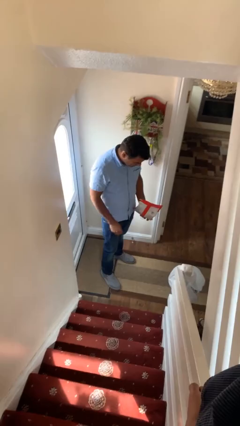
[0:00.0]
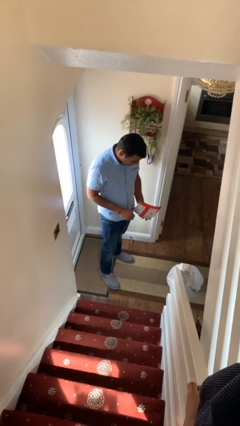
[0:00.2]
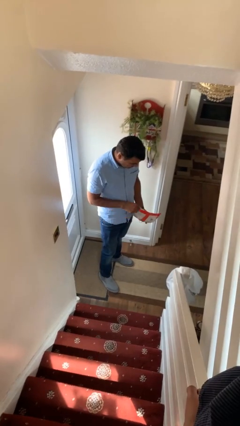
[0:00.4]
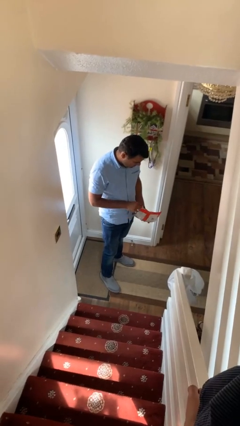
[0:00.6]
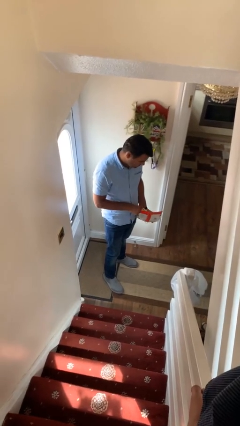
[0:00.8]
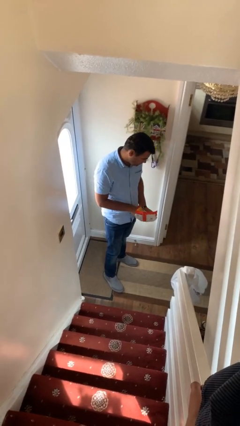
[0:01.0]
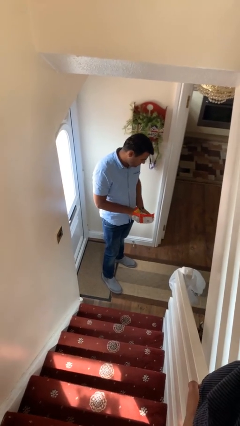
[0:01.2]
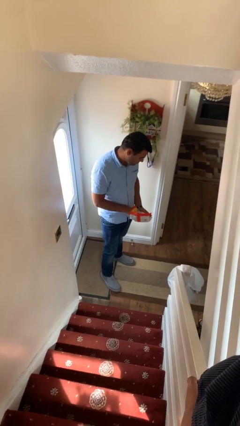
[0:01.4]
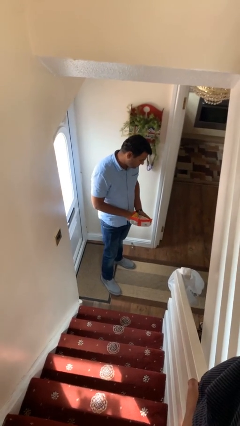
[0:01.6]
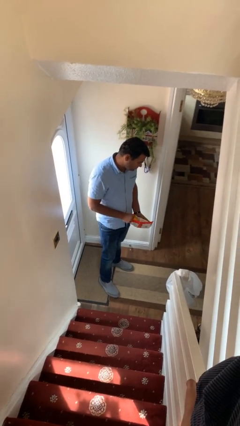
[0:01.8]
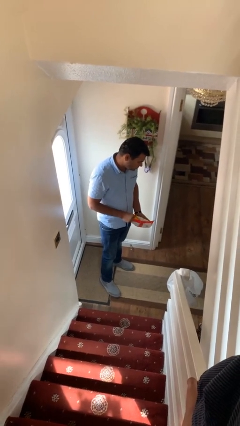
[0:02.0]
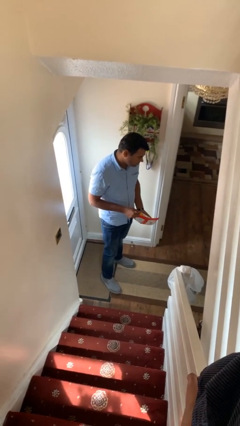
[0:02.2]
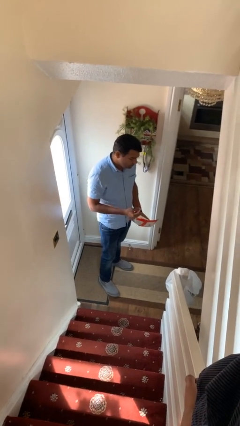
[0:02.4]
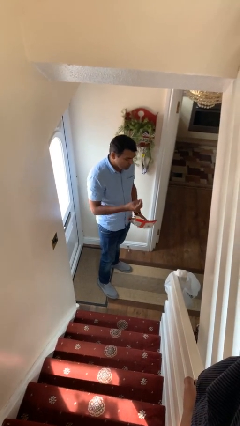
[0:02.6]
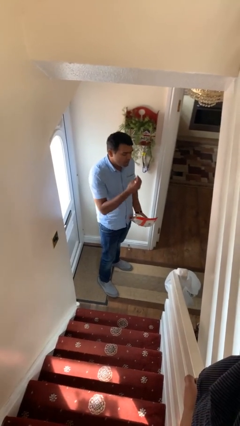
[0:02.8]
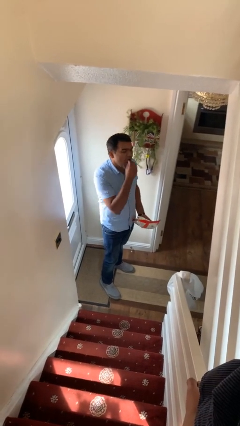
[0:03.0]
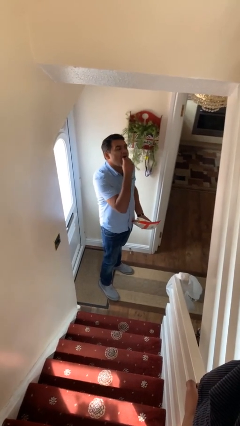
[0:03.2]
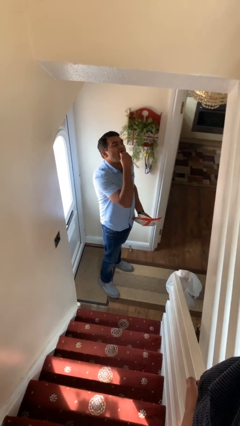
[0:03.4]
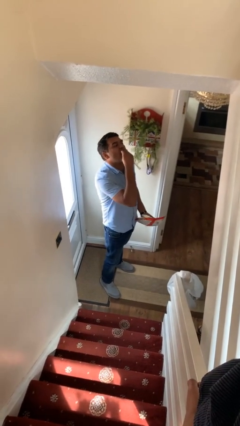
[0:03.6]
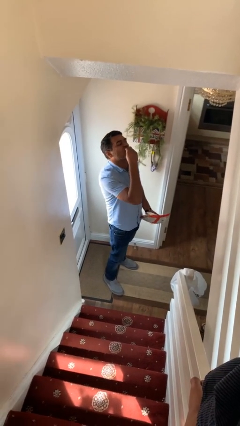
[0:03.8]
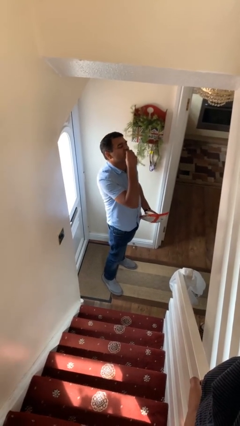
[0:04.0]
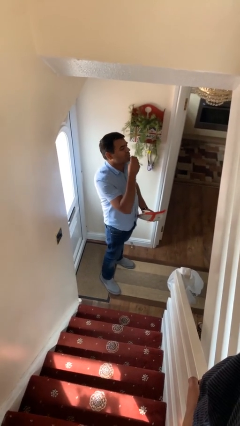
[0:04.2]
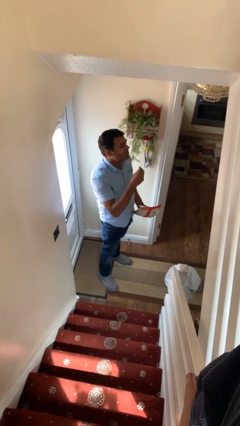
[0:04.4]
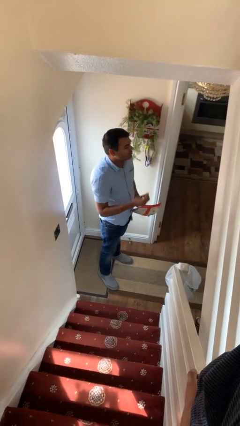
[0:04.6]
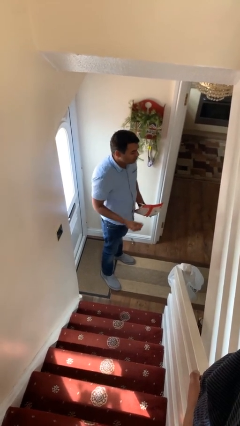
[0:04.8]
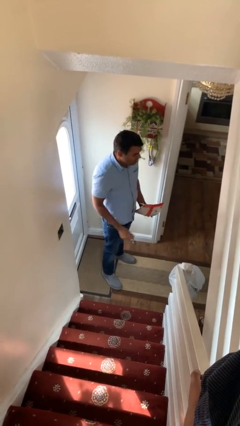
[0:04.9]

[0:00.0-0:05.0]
person eats snack from bag

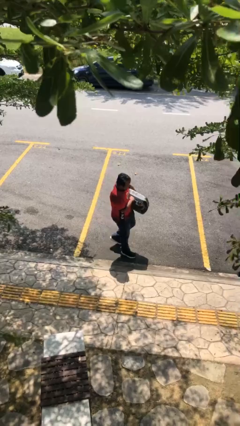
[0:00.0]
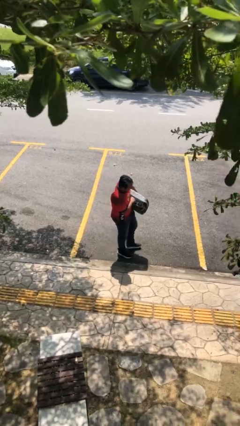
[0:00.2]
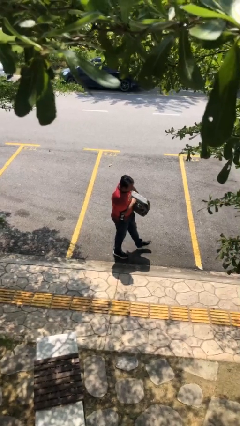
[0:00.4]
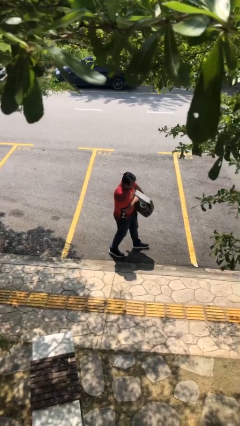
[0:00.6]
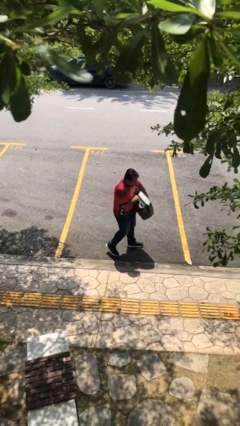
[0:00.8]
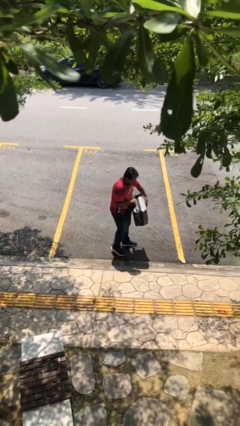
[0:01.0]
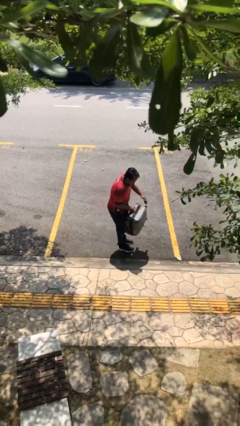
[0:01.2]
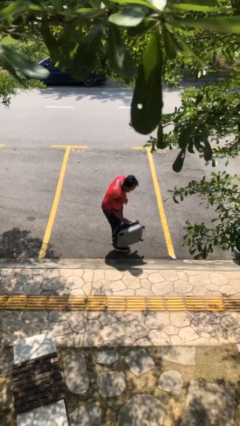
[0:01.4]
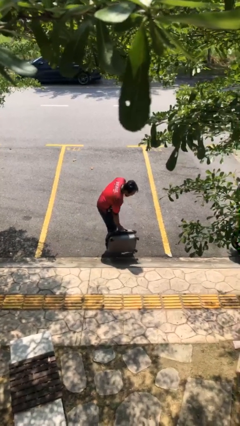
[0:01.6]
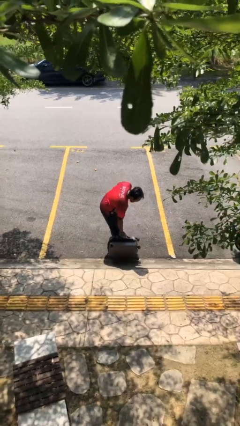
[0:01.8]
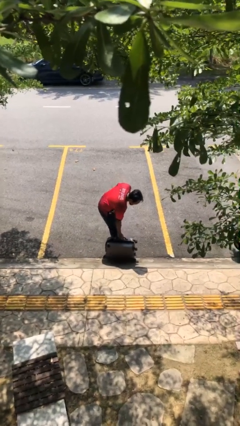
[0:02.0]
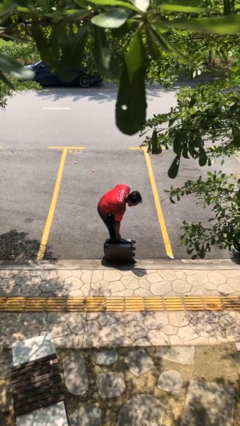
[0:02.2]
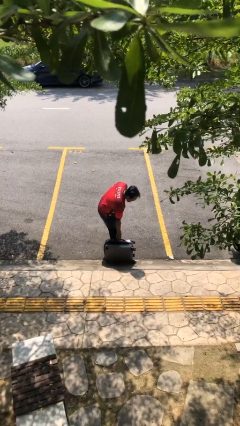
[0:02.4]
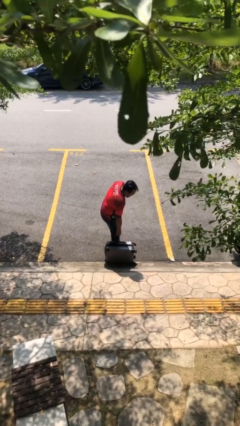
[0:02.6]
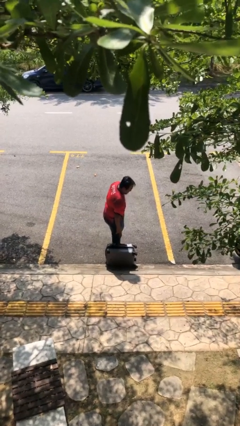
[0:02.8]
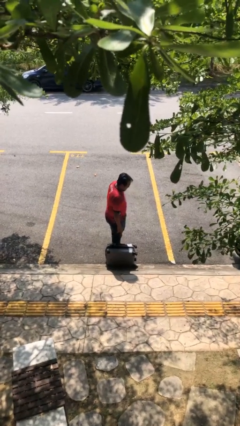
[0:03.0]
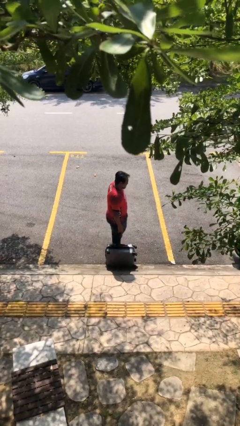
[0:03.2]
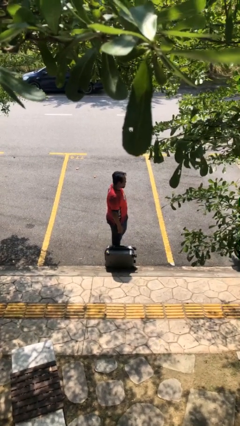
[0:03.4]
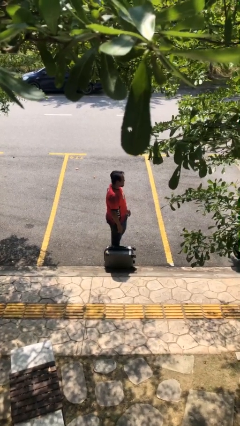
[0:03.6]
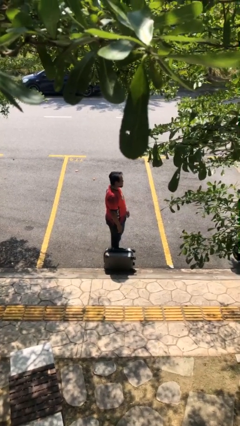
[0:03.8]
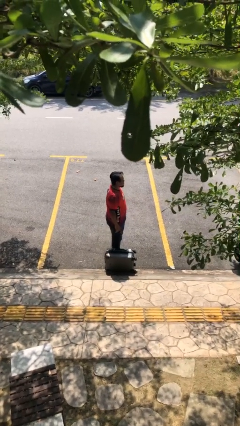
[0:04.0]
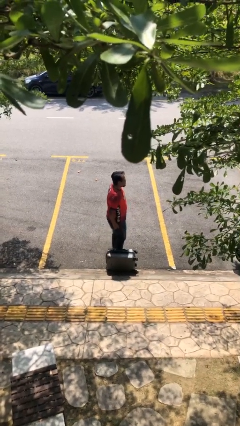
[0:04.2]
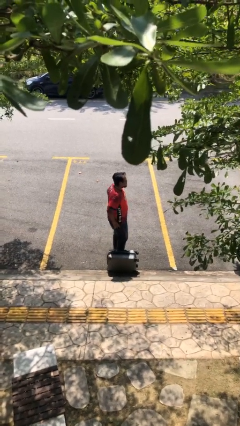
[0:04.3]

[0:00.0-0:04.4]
person puts down object on floor

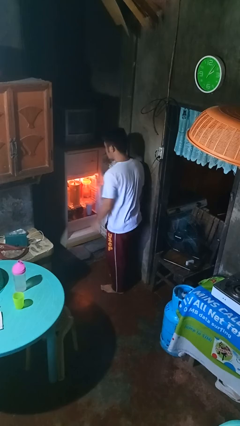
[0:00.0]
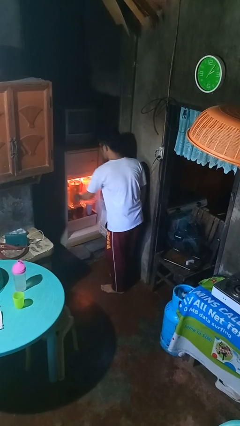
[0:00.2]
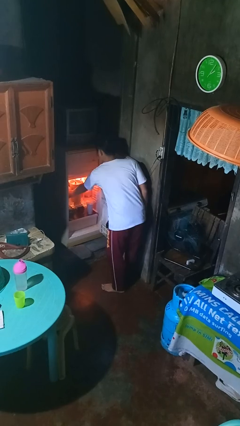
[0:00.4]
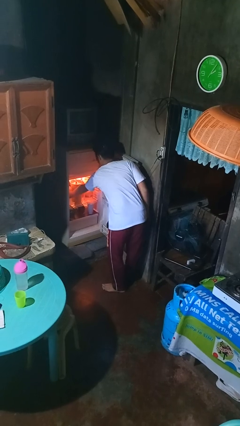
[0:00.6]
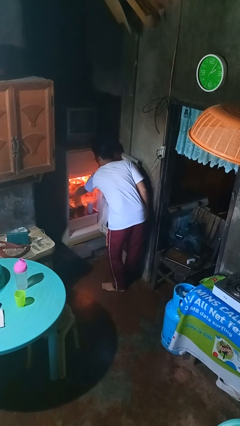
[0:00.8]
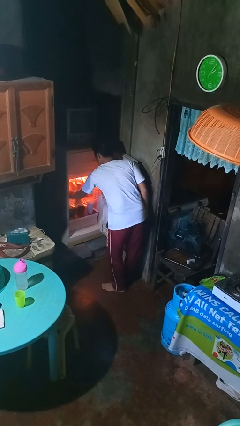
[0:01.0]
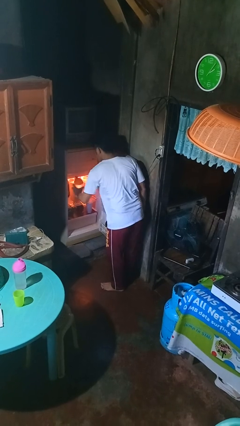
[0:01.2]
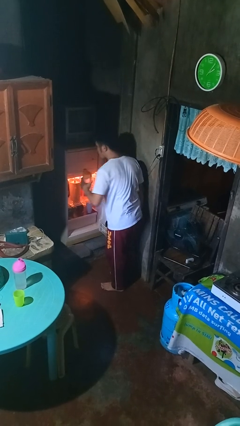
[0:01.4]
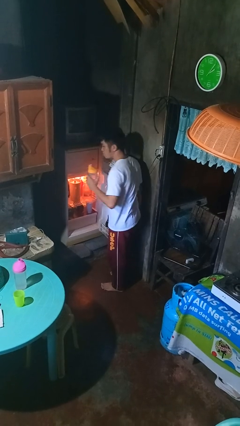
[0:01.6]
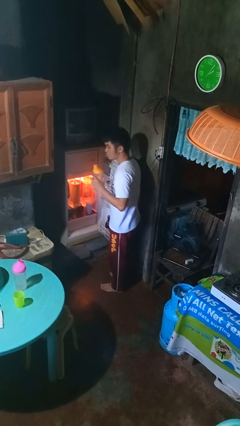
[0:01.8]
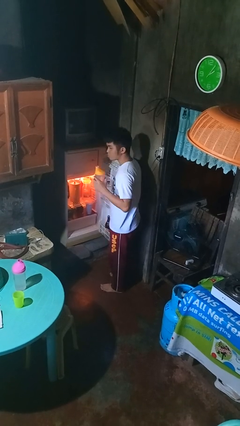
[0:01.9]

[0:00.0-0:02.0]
person takes object from refrigerator

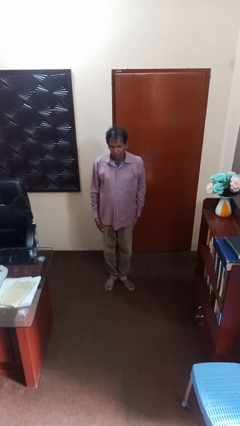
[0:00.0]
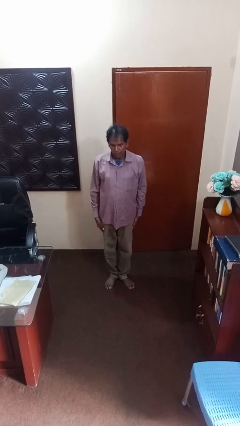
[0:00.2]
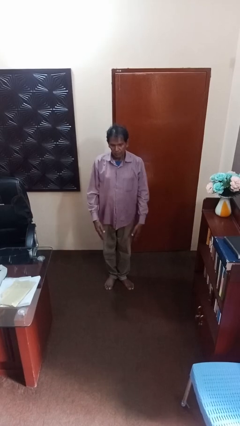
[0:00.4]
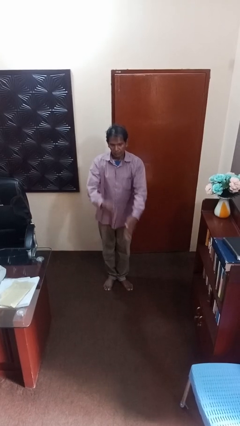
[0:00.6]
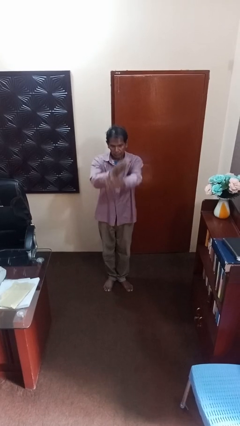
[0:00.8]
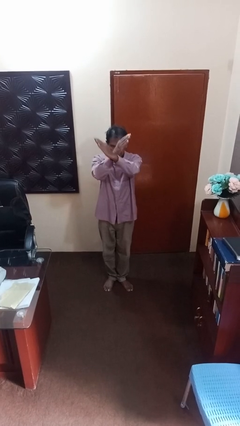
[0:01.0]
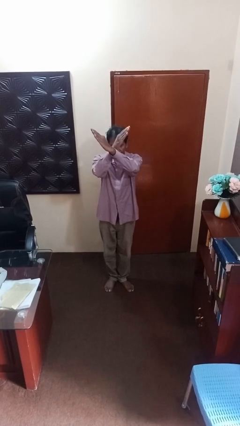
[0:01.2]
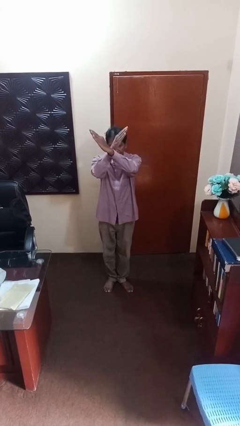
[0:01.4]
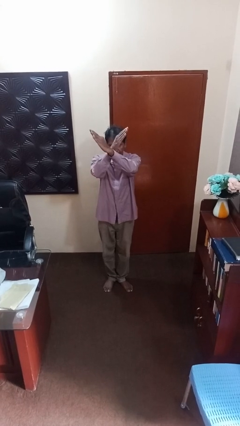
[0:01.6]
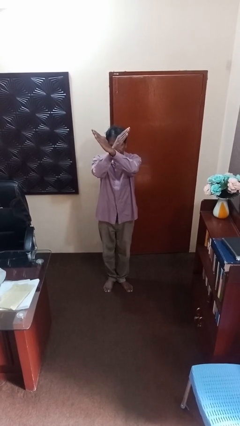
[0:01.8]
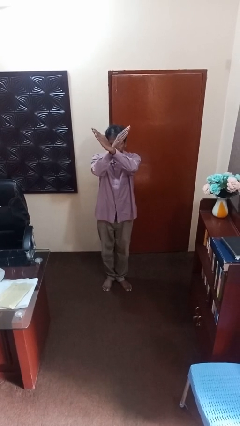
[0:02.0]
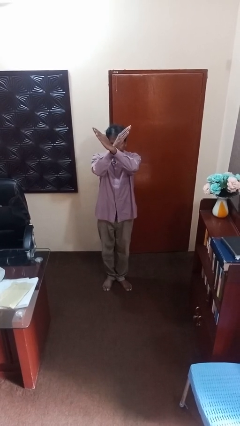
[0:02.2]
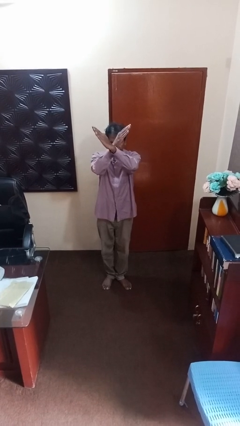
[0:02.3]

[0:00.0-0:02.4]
person gestures arms x

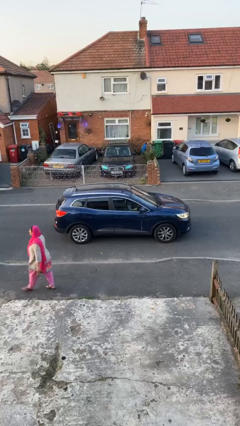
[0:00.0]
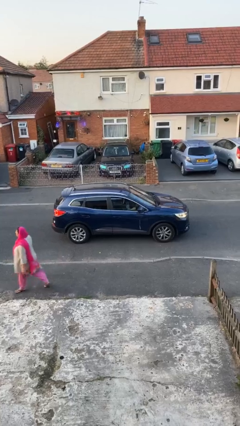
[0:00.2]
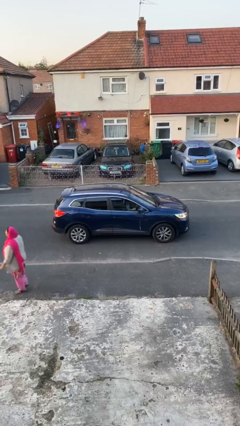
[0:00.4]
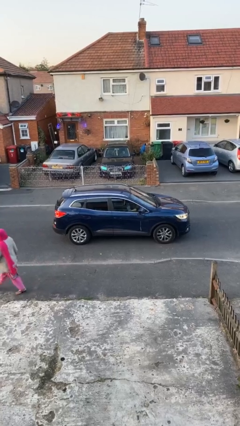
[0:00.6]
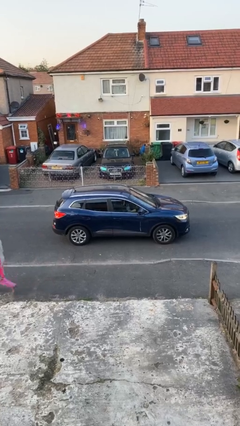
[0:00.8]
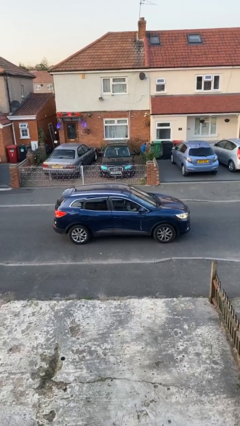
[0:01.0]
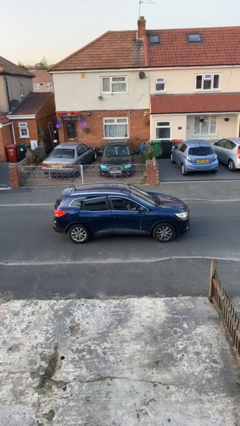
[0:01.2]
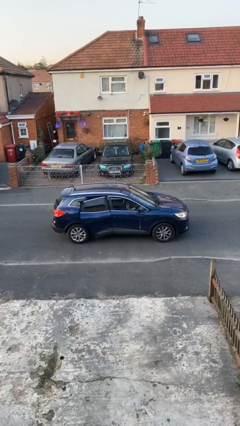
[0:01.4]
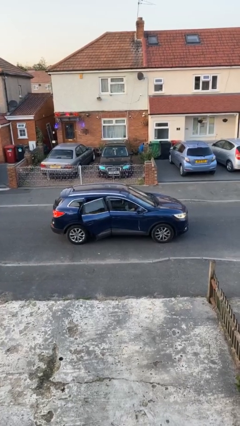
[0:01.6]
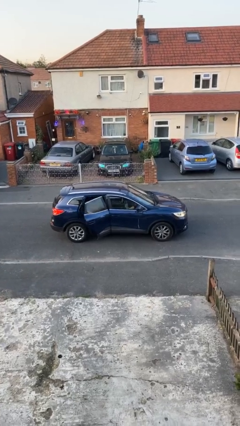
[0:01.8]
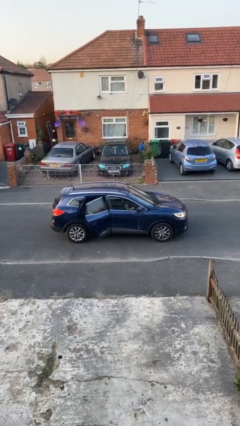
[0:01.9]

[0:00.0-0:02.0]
car drops off person

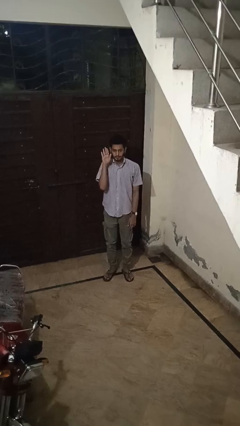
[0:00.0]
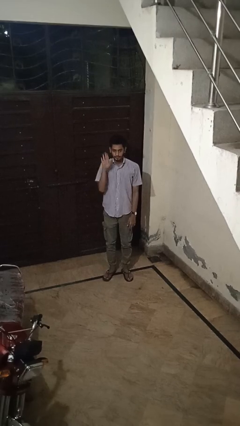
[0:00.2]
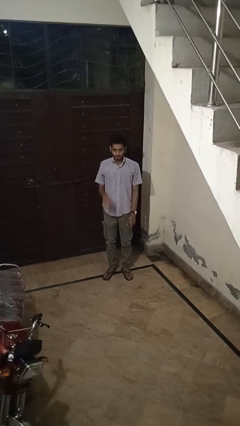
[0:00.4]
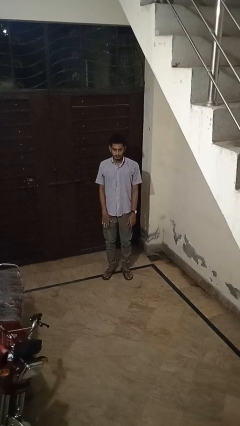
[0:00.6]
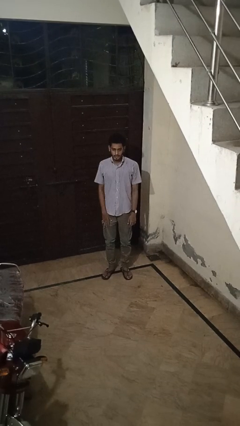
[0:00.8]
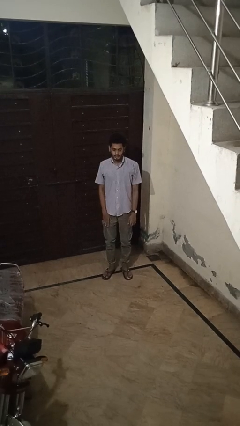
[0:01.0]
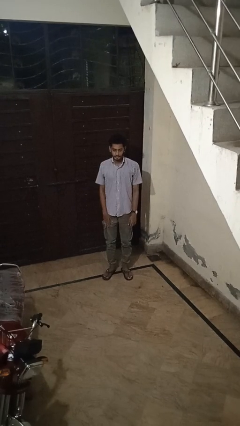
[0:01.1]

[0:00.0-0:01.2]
person gestures lower hand

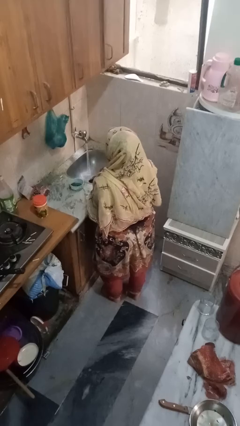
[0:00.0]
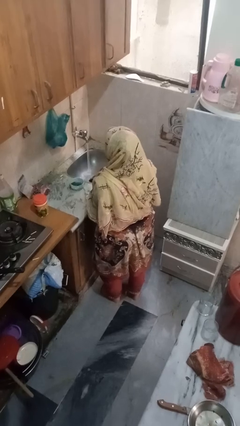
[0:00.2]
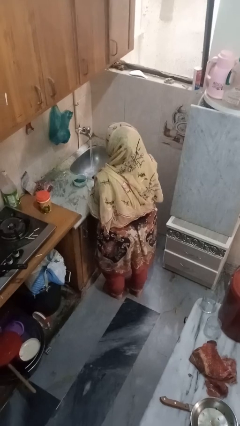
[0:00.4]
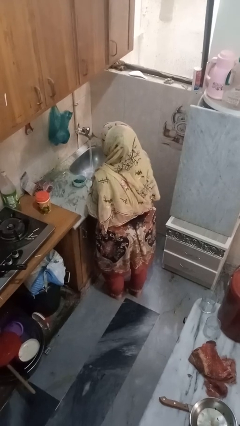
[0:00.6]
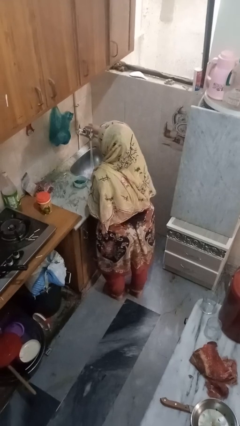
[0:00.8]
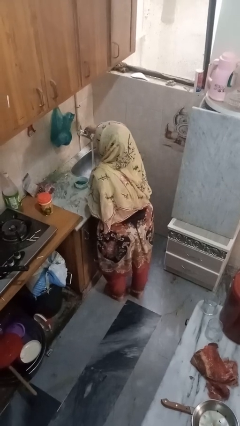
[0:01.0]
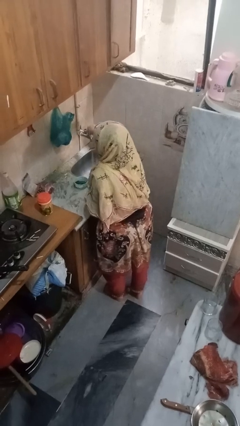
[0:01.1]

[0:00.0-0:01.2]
person turns off faucet
